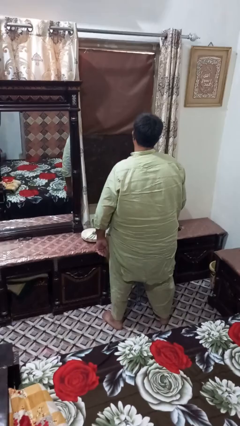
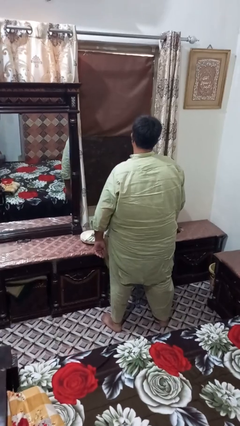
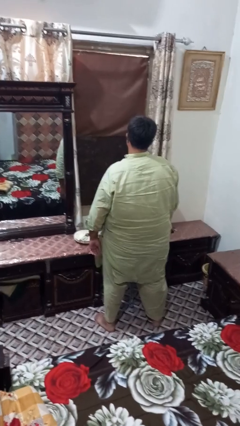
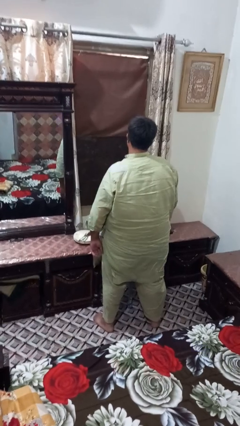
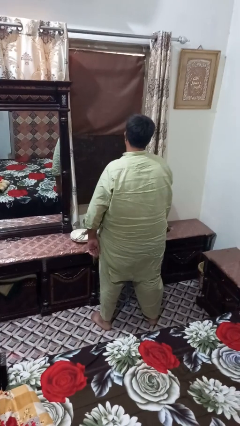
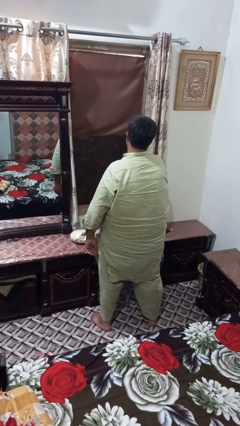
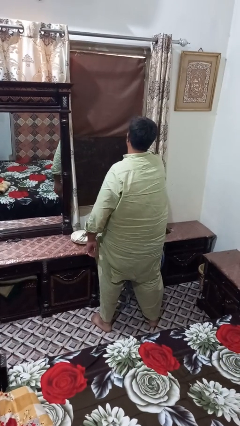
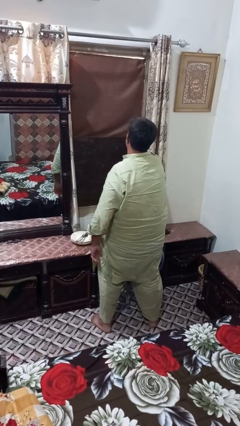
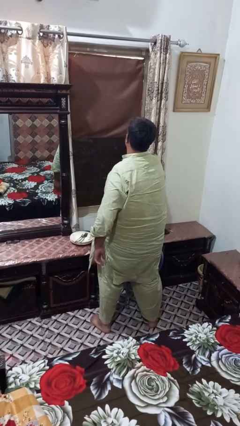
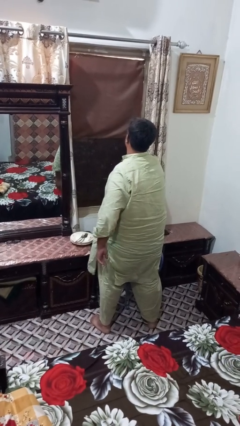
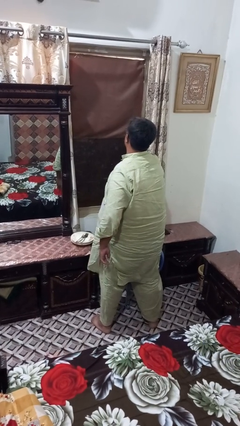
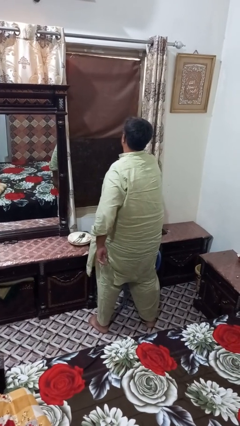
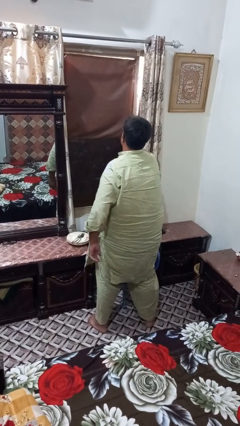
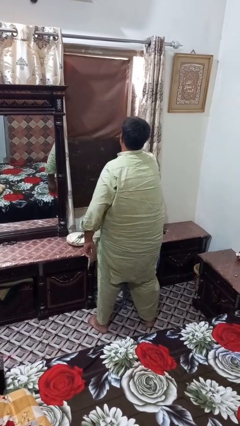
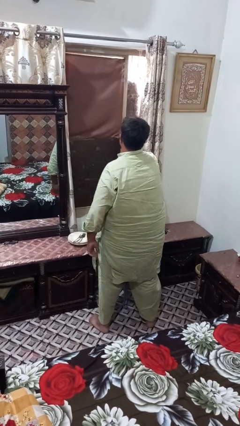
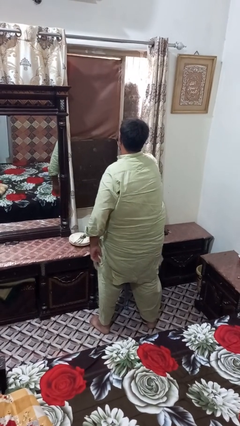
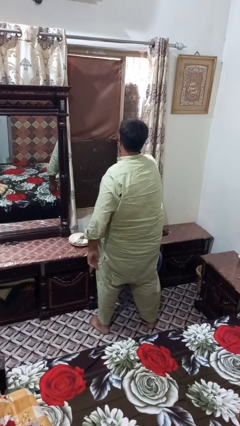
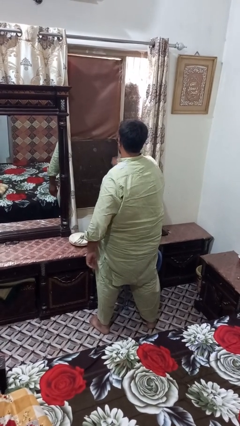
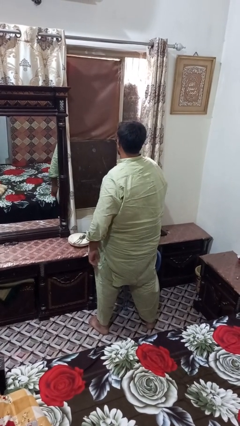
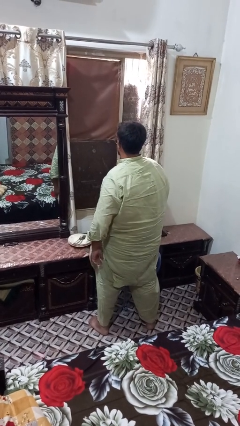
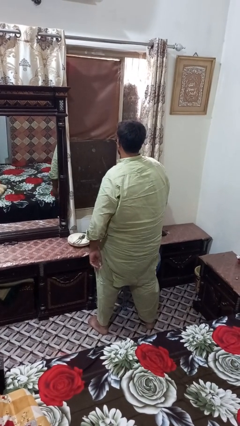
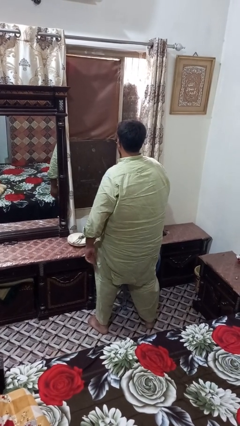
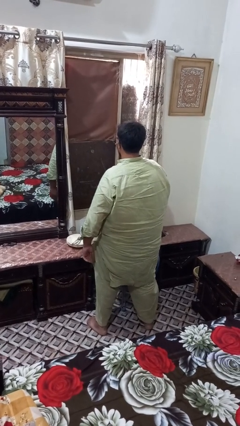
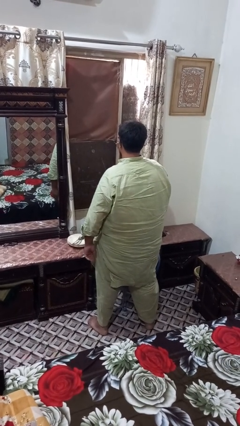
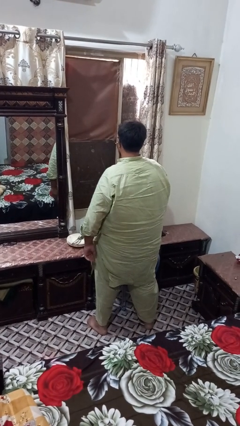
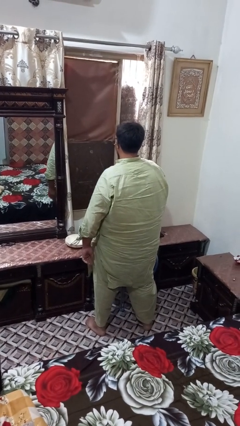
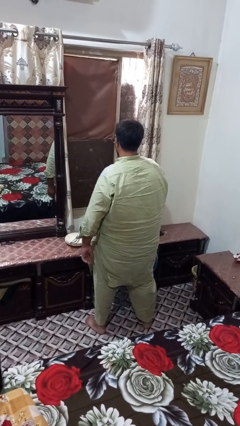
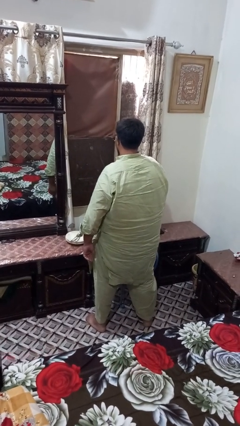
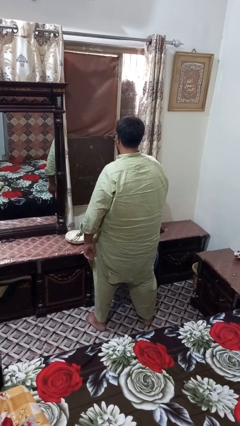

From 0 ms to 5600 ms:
person opens sliding door

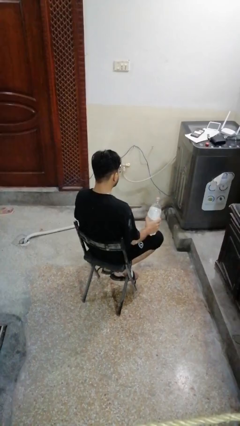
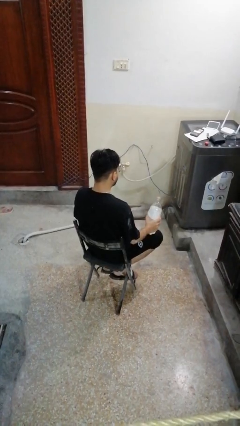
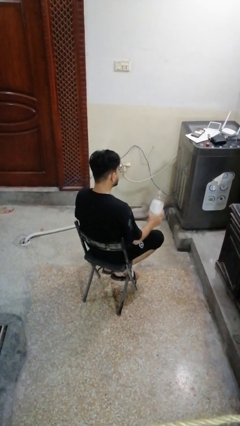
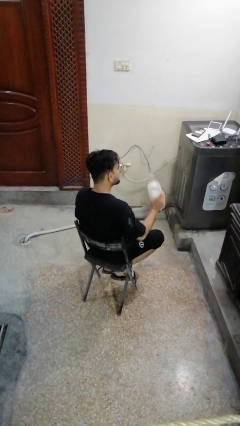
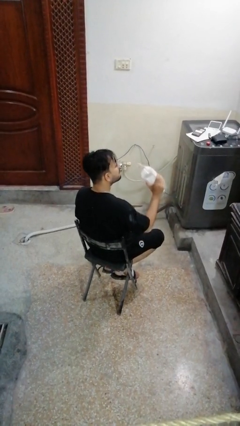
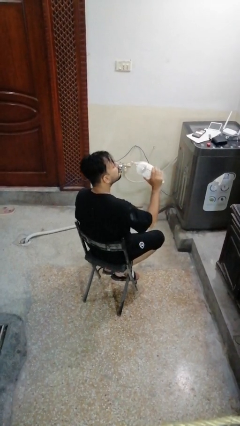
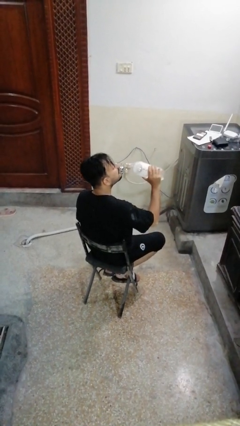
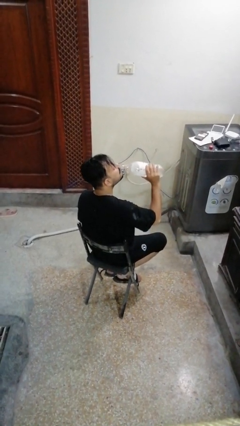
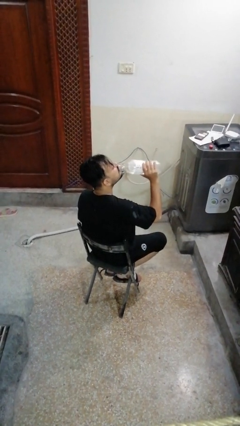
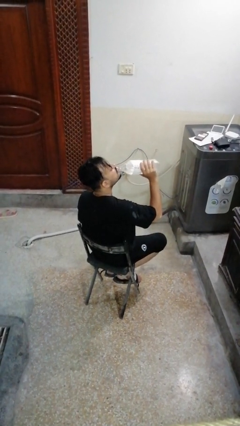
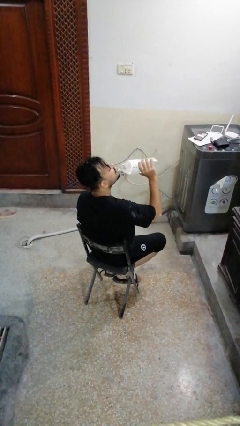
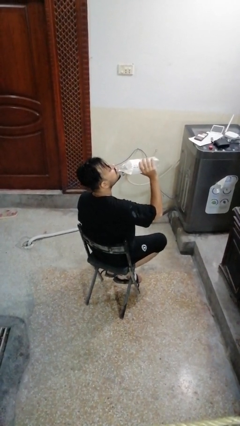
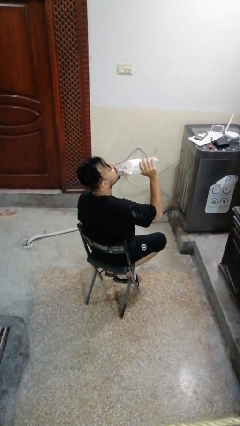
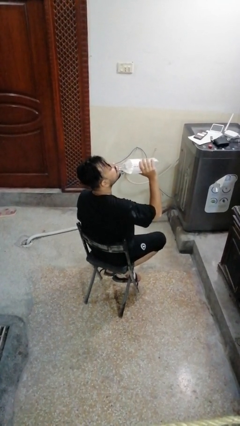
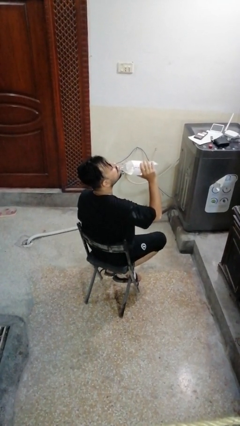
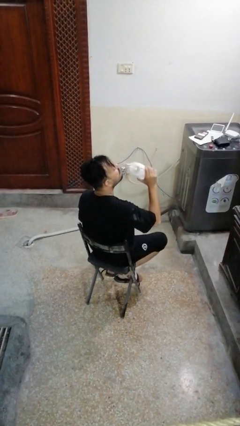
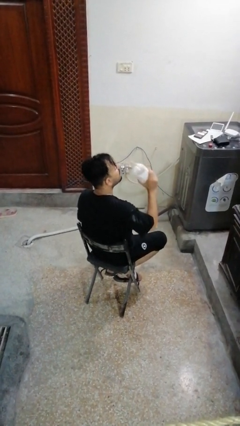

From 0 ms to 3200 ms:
person drinks from bottle

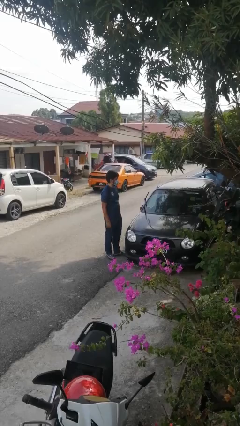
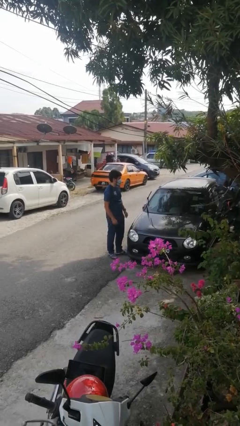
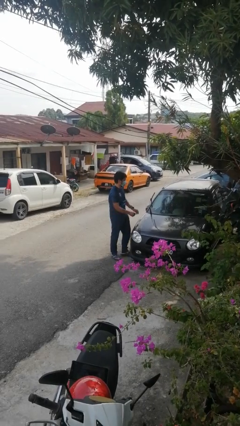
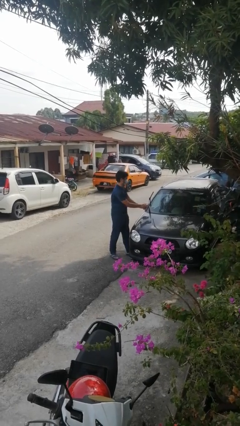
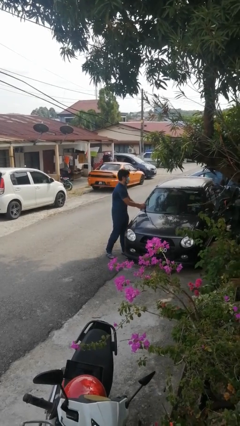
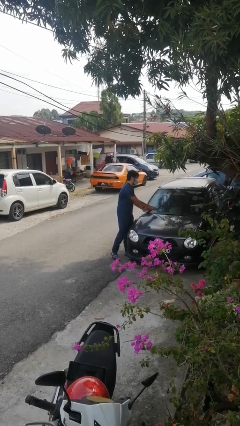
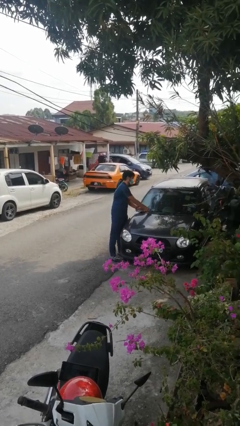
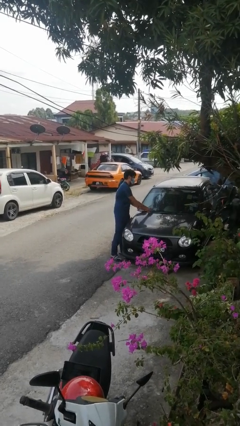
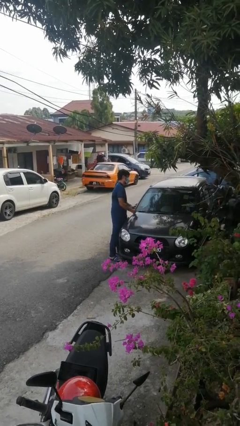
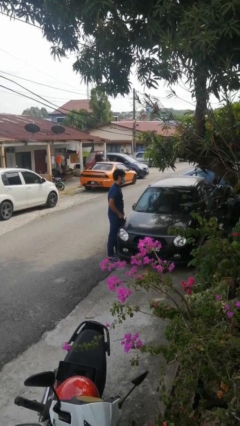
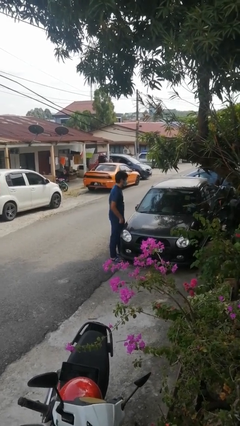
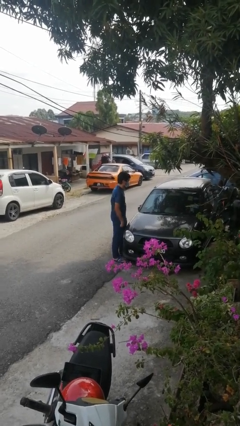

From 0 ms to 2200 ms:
person flips down car wipers

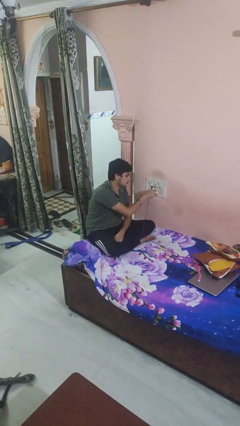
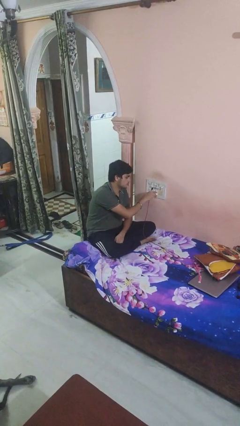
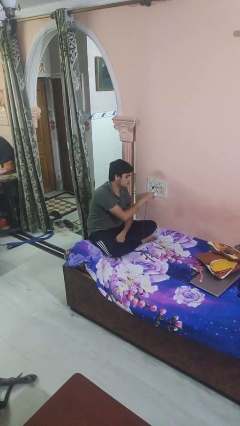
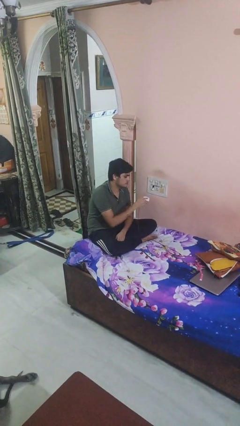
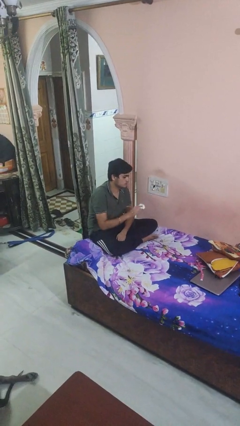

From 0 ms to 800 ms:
person unplugs from electrical socket

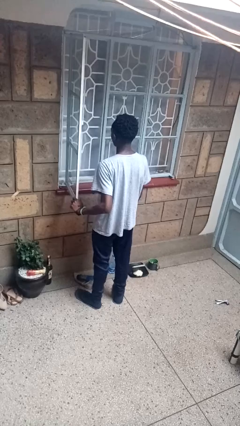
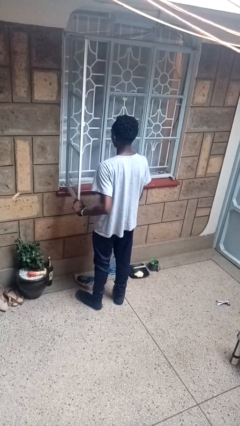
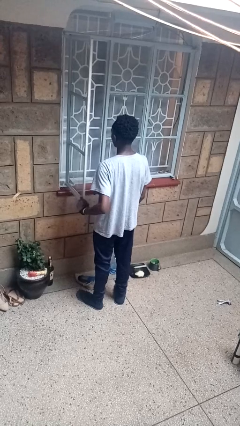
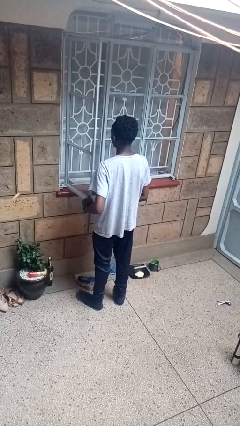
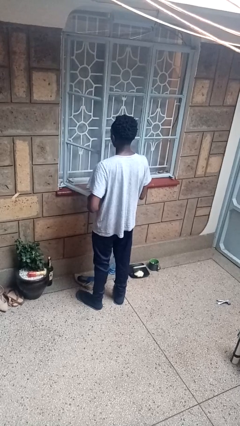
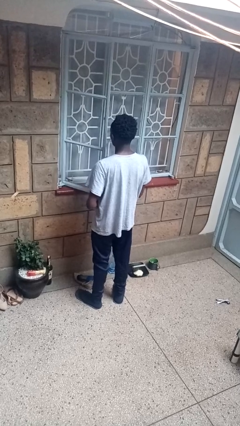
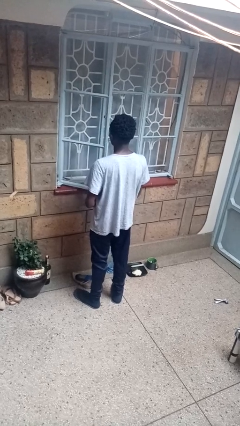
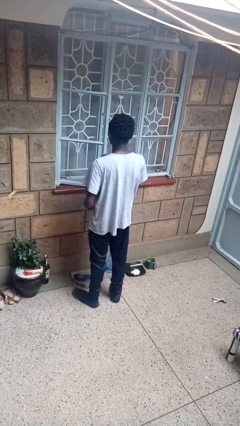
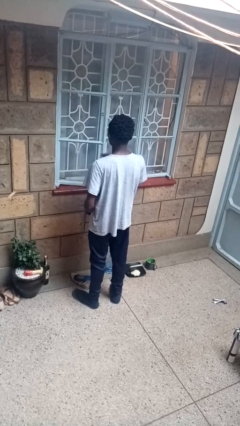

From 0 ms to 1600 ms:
person closes home window

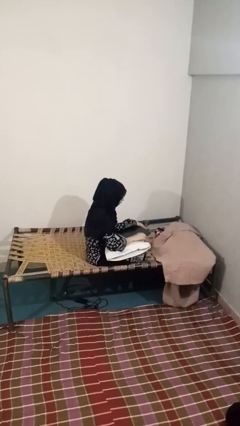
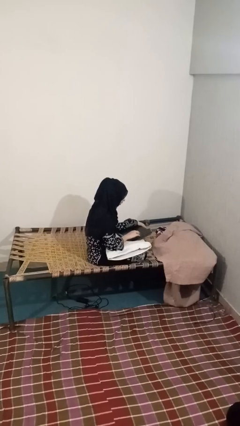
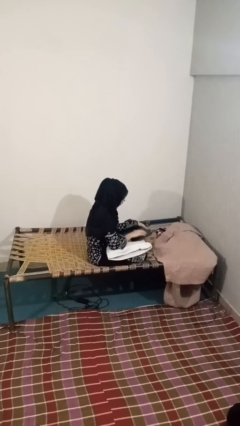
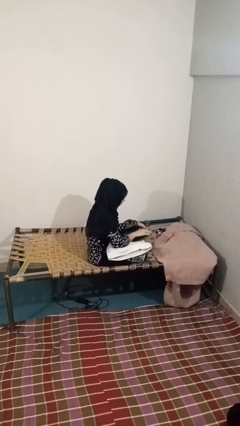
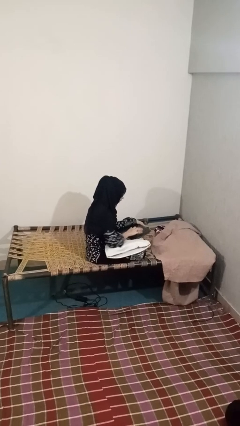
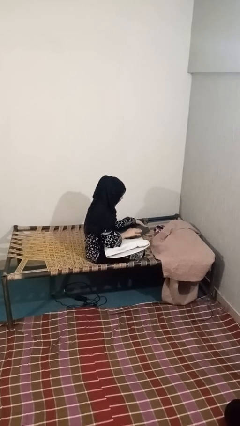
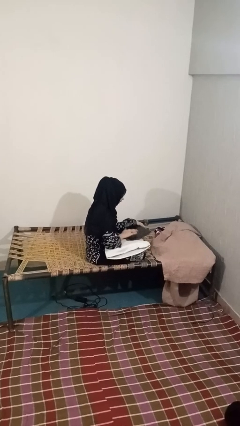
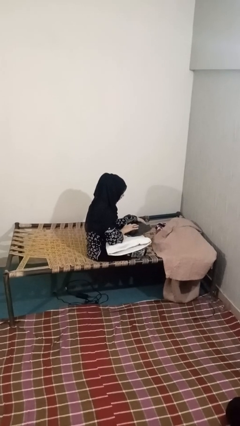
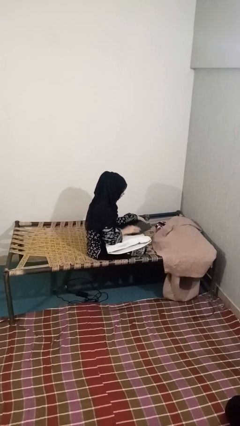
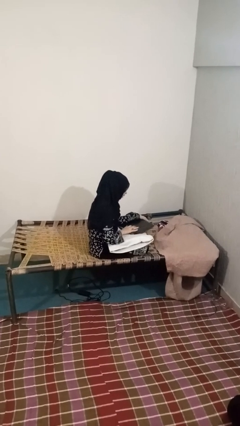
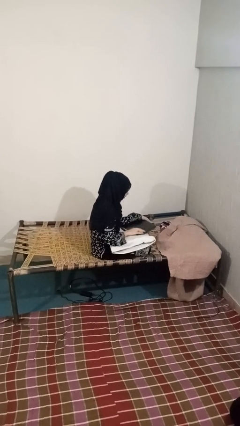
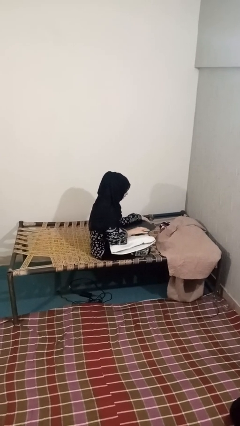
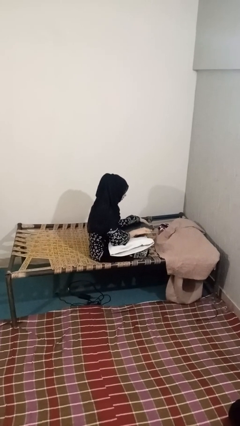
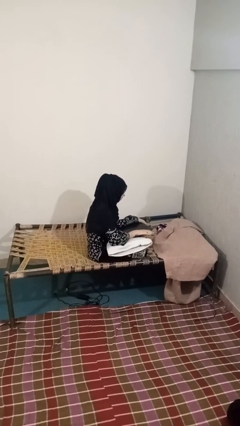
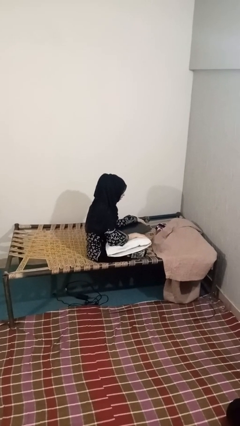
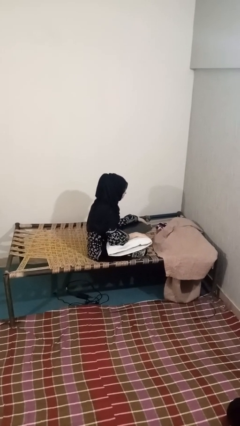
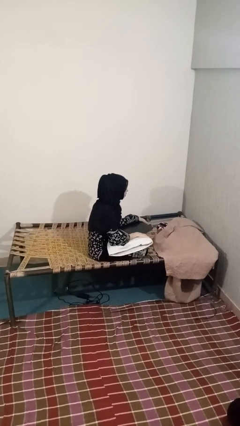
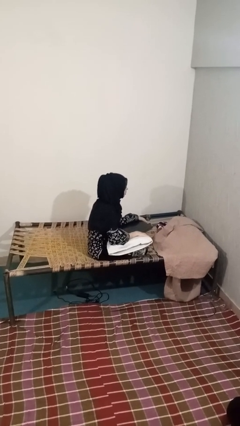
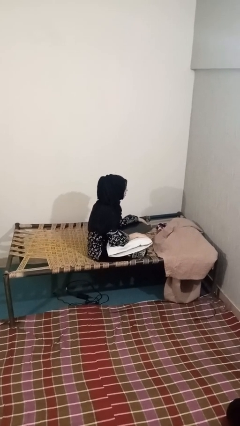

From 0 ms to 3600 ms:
person interacts with tablet

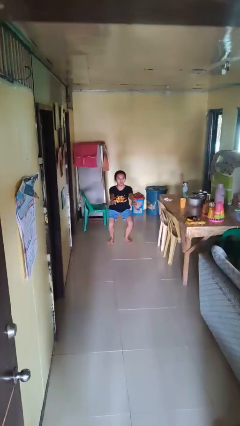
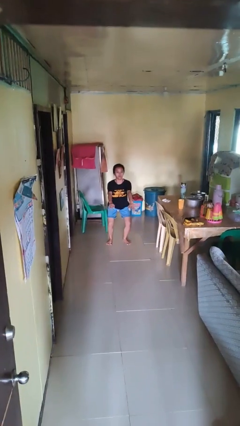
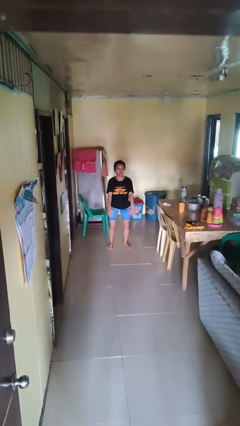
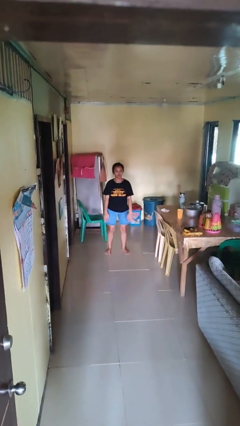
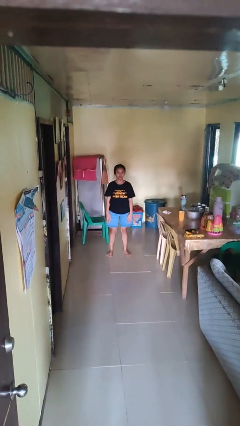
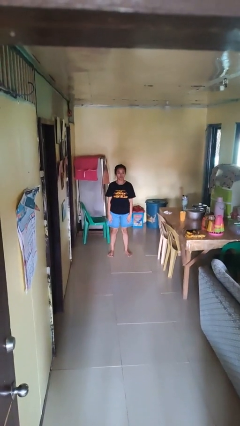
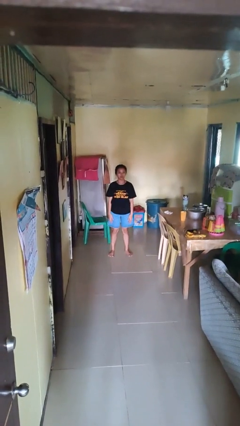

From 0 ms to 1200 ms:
person stands up
